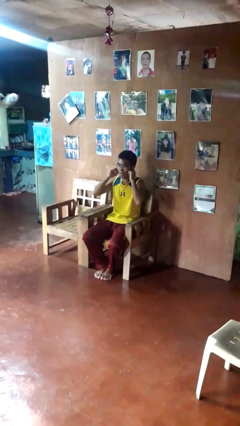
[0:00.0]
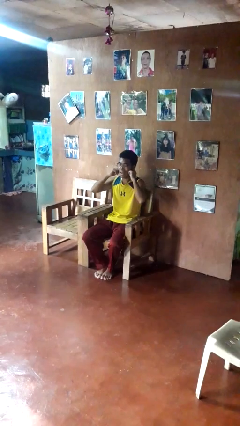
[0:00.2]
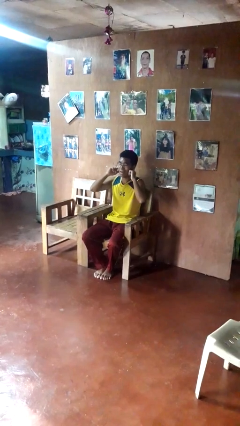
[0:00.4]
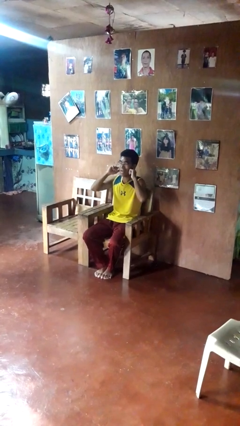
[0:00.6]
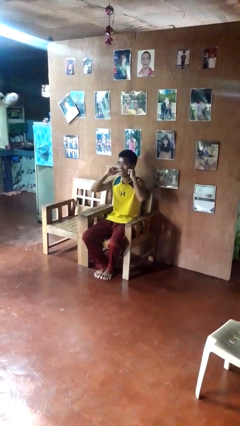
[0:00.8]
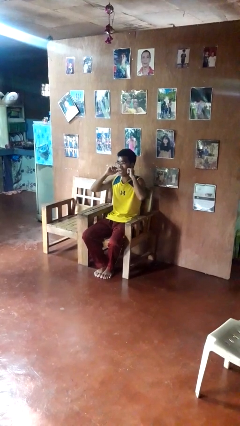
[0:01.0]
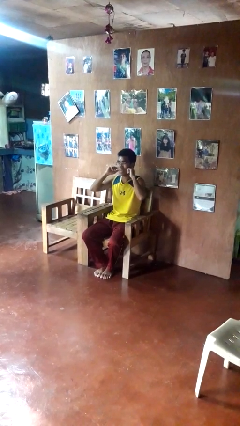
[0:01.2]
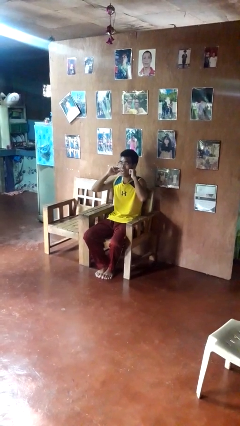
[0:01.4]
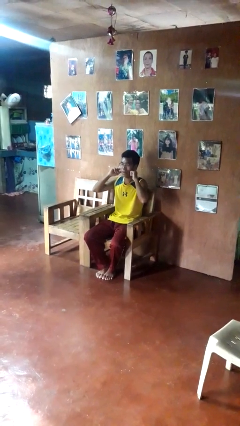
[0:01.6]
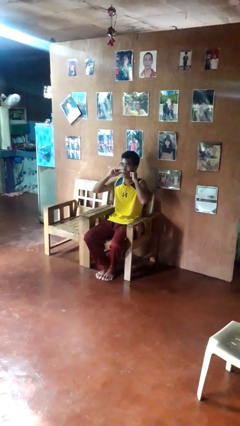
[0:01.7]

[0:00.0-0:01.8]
person puts fingers in ear

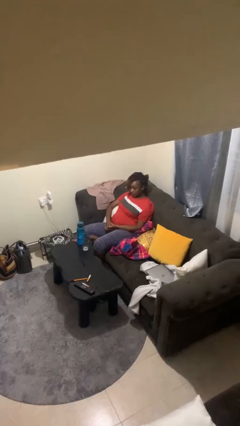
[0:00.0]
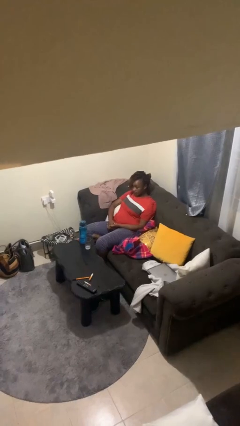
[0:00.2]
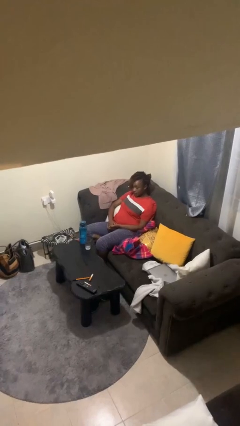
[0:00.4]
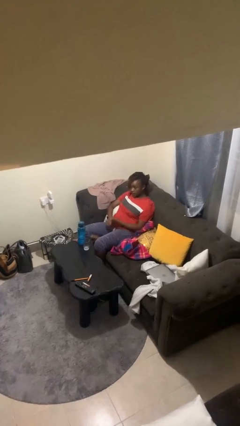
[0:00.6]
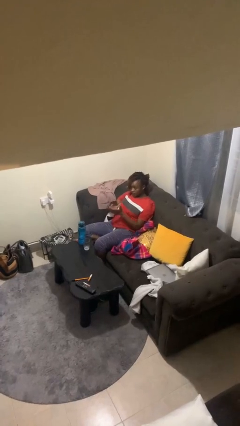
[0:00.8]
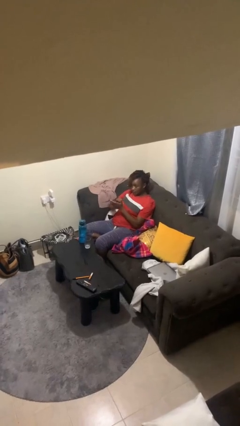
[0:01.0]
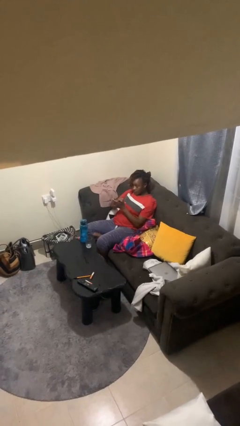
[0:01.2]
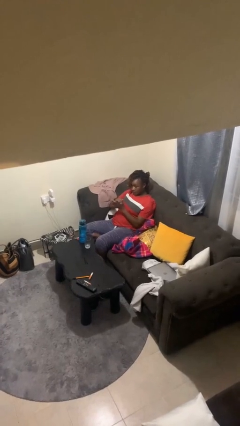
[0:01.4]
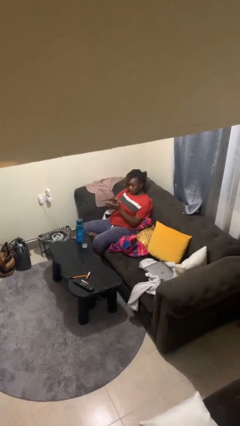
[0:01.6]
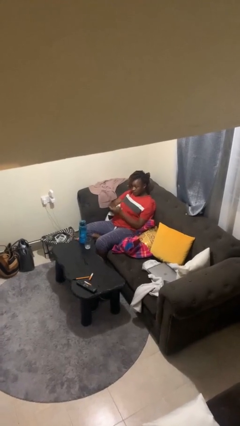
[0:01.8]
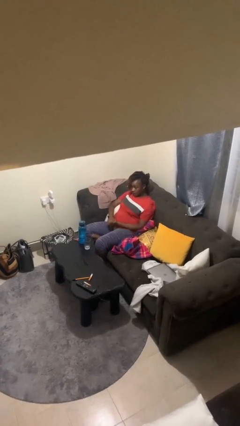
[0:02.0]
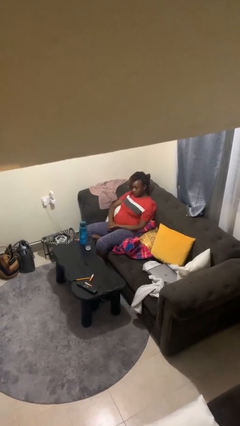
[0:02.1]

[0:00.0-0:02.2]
person claps hands

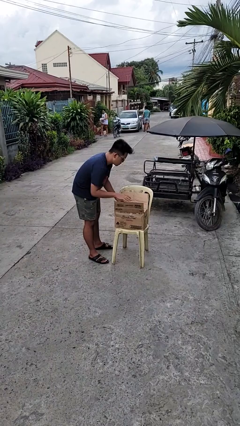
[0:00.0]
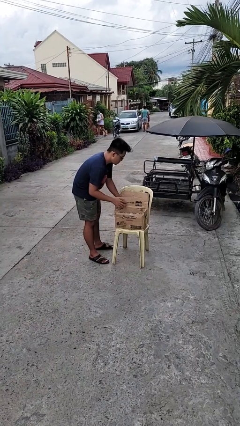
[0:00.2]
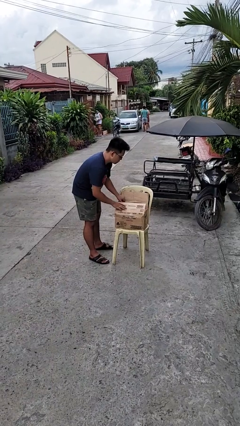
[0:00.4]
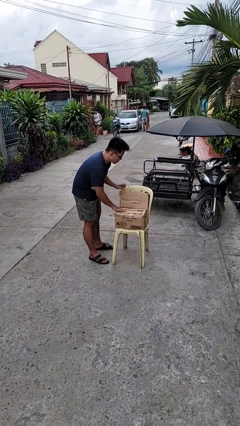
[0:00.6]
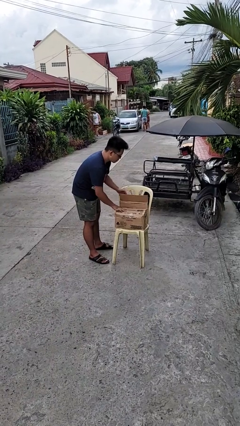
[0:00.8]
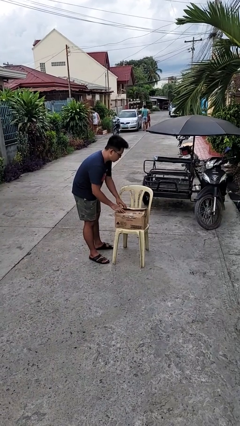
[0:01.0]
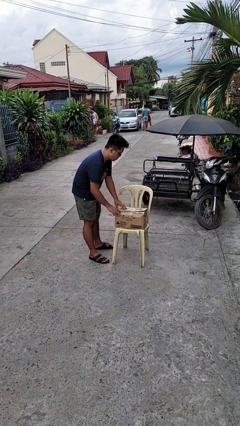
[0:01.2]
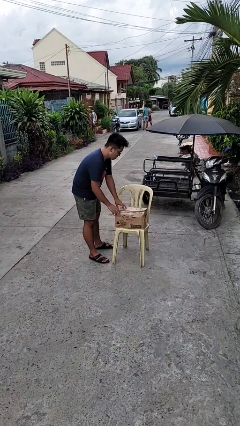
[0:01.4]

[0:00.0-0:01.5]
person closes box

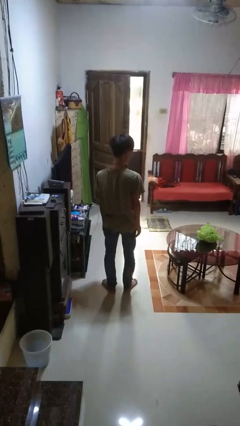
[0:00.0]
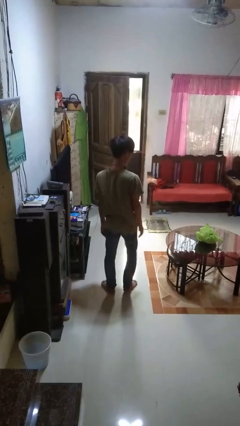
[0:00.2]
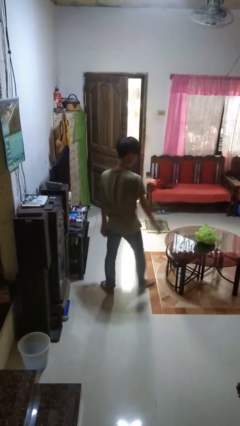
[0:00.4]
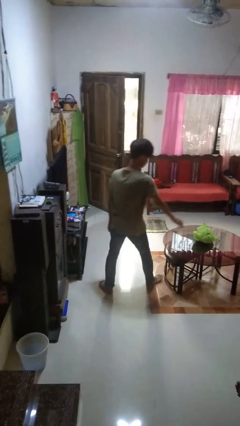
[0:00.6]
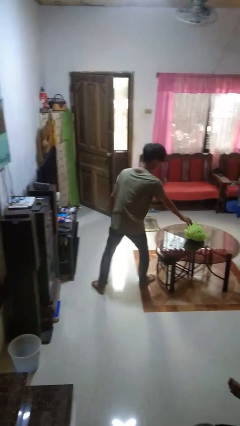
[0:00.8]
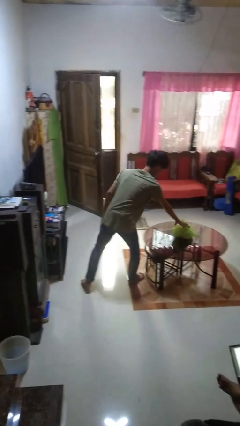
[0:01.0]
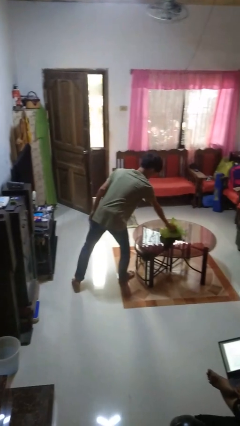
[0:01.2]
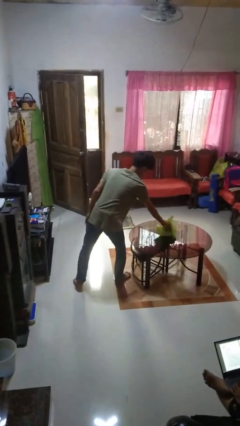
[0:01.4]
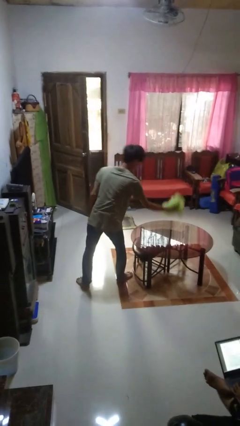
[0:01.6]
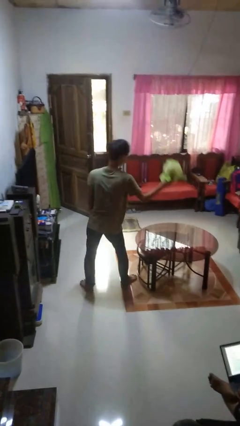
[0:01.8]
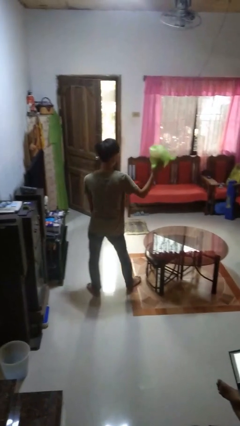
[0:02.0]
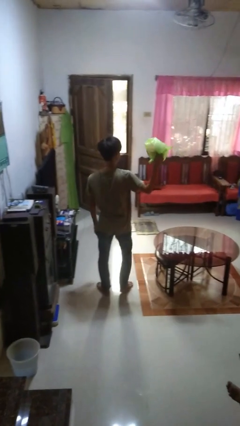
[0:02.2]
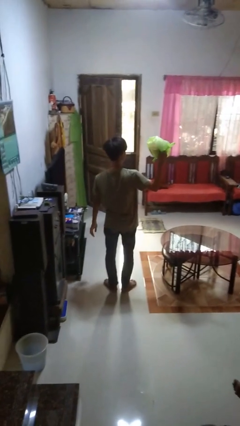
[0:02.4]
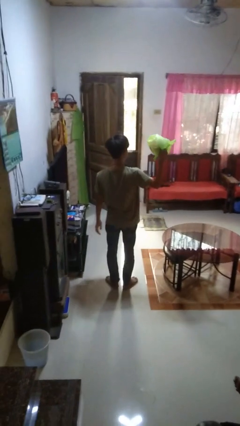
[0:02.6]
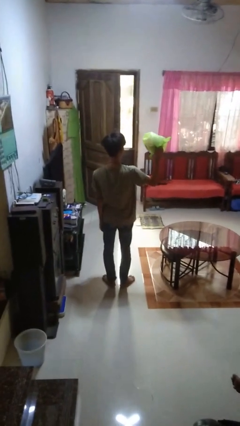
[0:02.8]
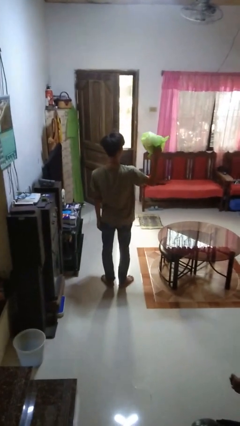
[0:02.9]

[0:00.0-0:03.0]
person picks up object from table

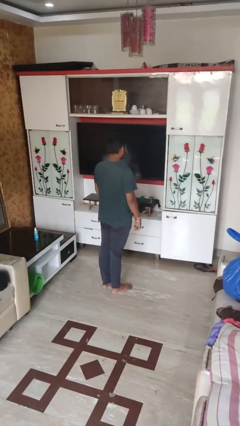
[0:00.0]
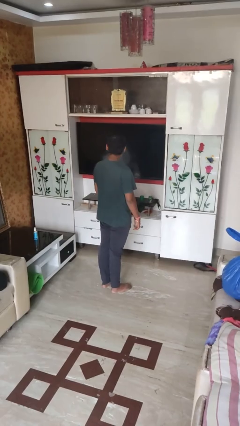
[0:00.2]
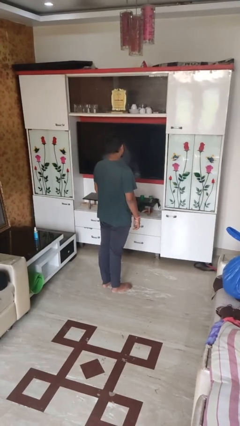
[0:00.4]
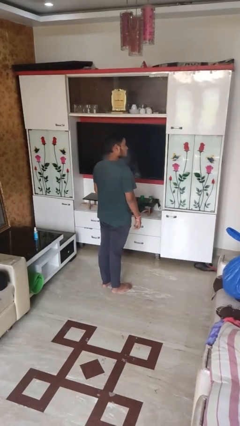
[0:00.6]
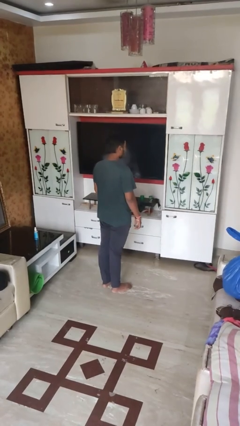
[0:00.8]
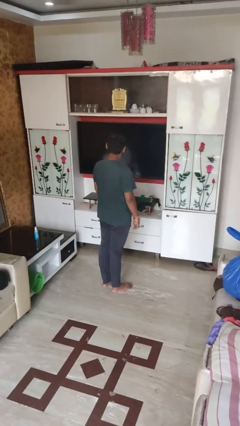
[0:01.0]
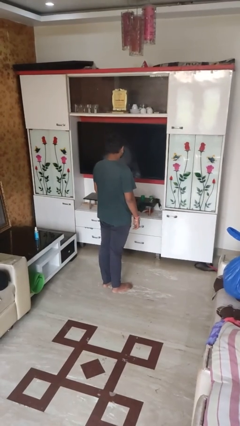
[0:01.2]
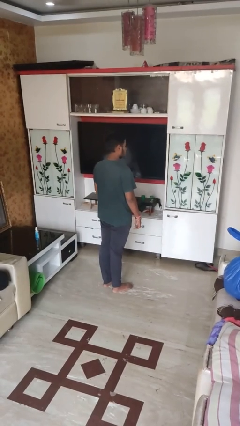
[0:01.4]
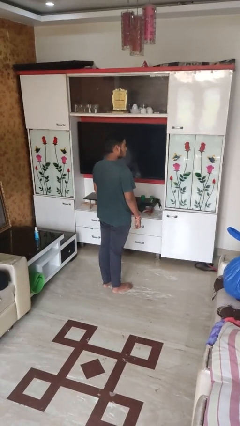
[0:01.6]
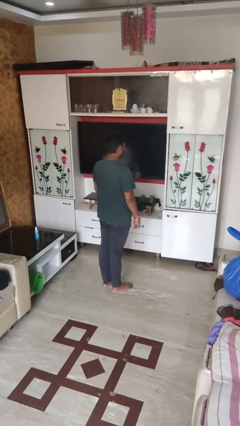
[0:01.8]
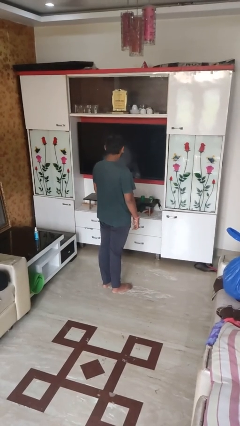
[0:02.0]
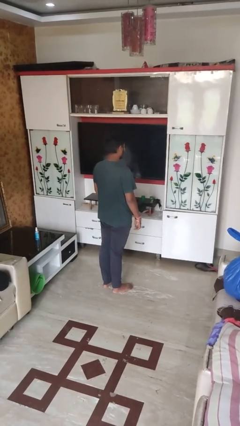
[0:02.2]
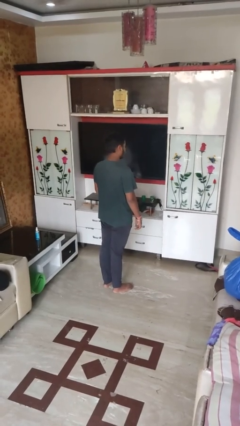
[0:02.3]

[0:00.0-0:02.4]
person shakes head

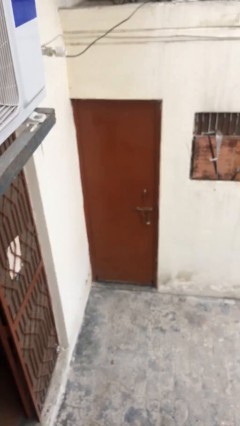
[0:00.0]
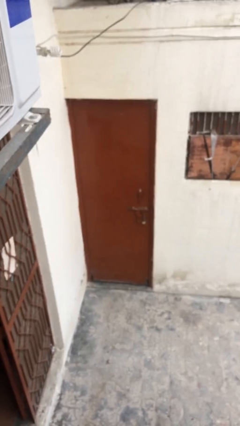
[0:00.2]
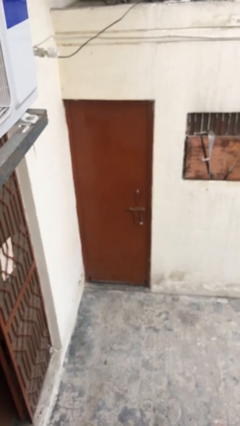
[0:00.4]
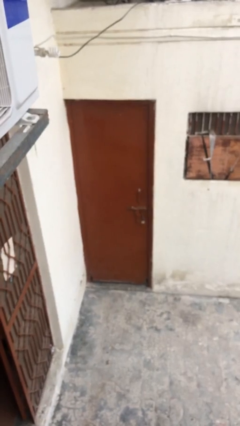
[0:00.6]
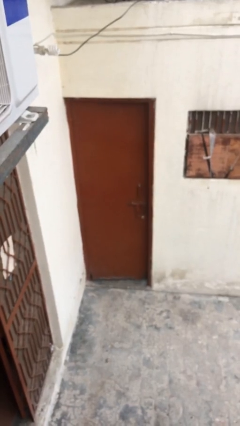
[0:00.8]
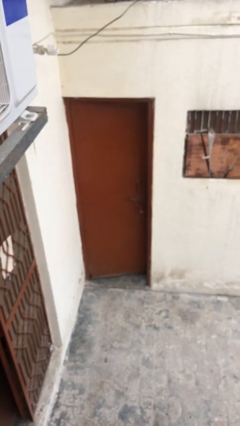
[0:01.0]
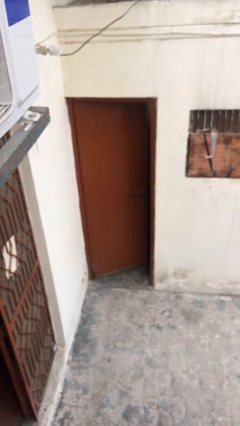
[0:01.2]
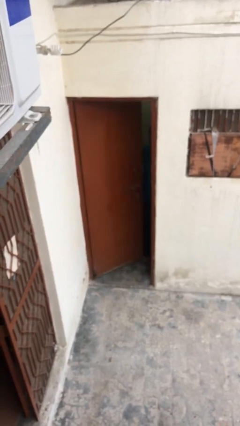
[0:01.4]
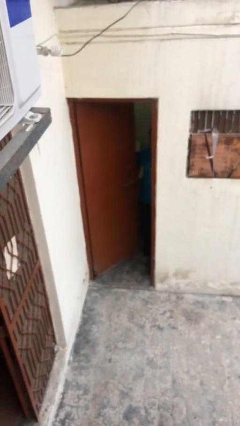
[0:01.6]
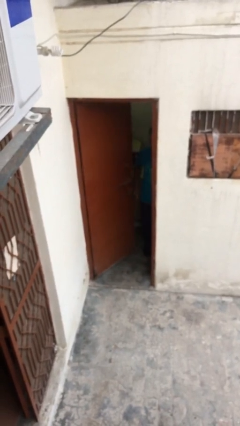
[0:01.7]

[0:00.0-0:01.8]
person opens facility door

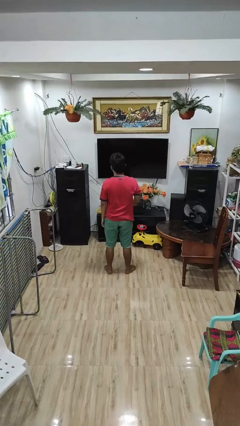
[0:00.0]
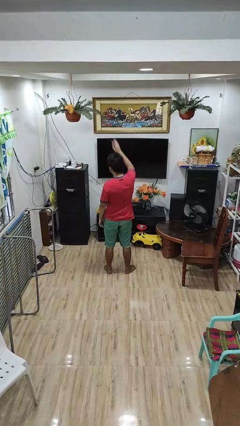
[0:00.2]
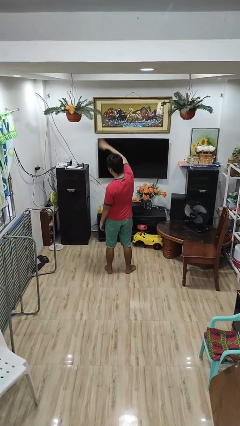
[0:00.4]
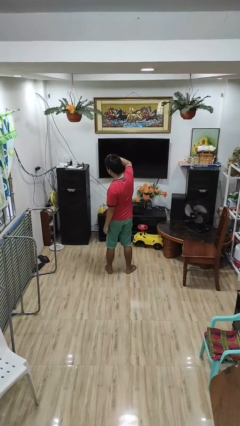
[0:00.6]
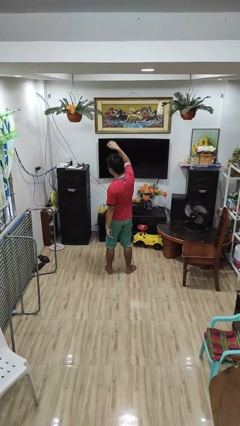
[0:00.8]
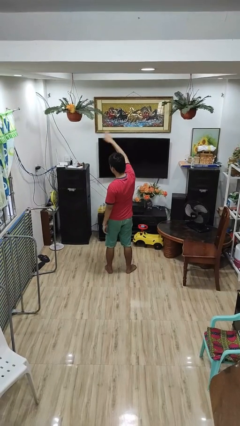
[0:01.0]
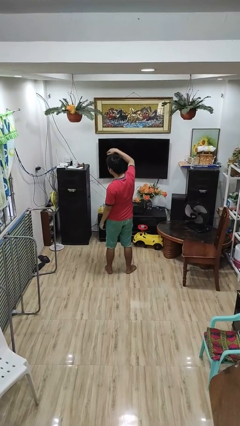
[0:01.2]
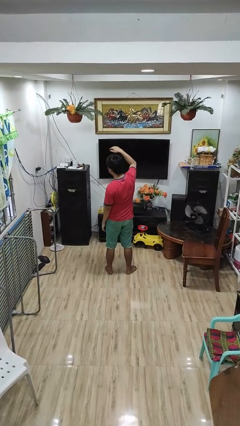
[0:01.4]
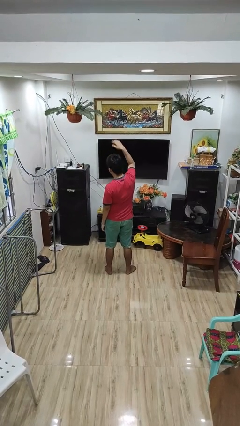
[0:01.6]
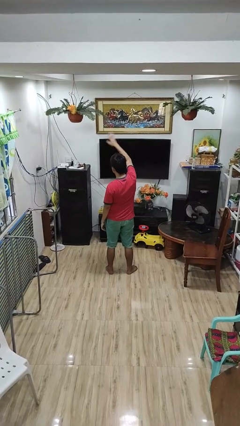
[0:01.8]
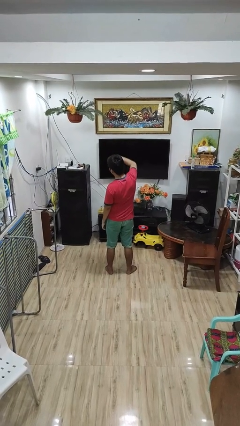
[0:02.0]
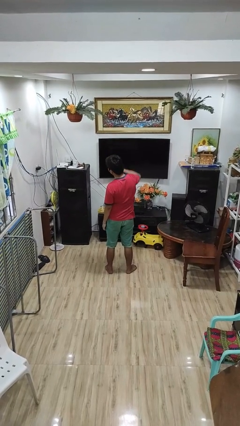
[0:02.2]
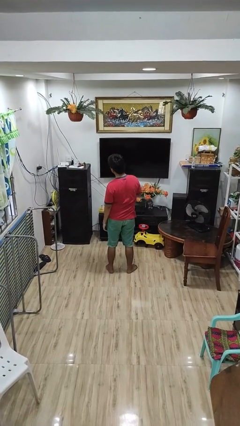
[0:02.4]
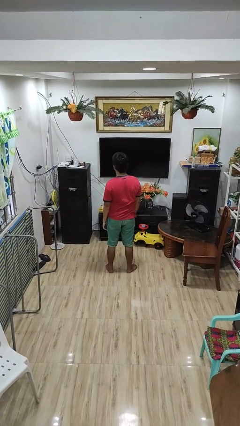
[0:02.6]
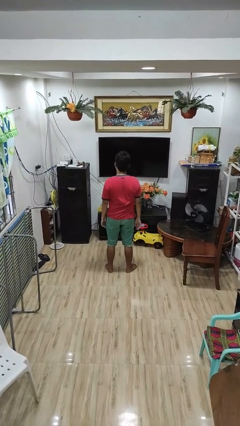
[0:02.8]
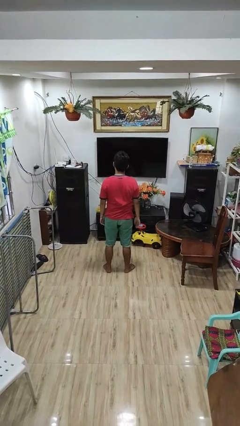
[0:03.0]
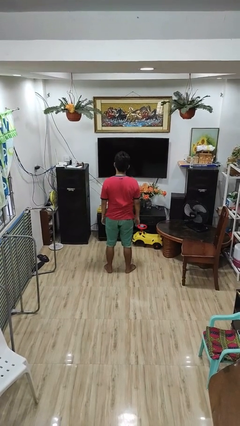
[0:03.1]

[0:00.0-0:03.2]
person gestures come here

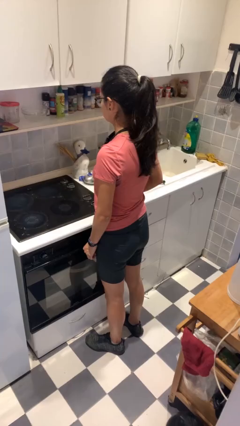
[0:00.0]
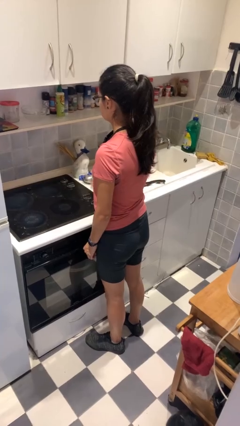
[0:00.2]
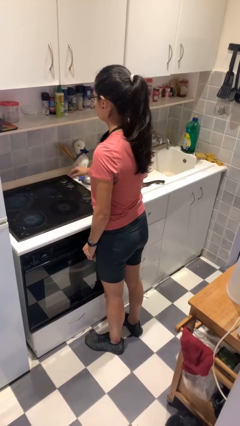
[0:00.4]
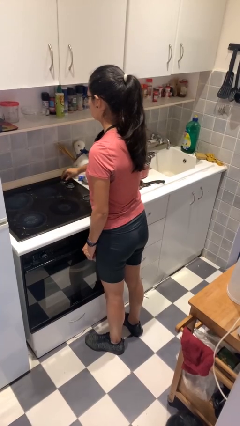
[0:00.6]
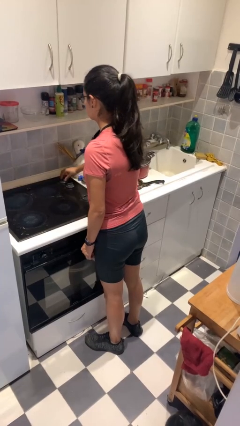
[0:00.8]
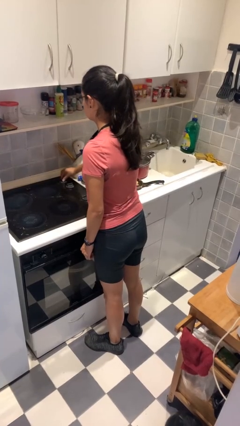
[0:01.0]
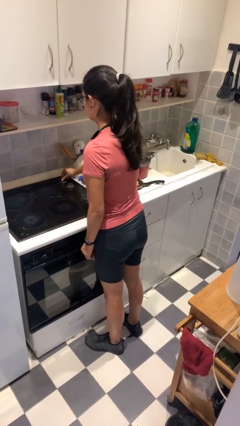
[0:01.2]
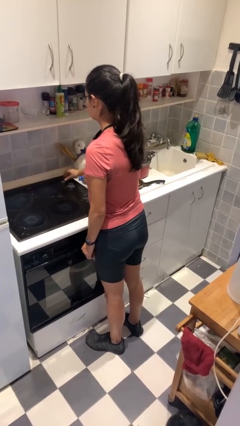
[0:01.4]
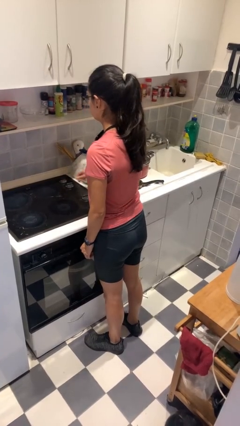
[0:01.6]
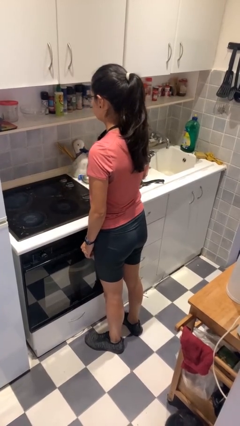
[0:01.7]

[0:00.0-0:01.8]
person turns off stovetop
